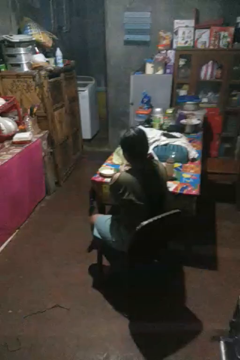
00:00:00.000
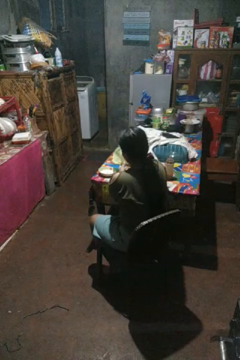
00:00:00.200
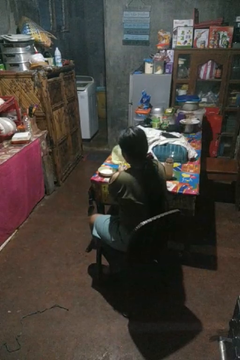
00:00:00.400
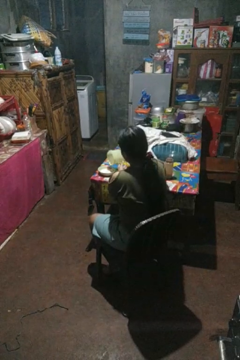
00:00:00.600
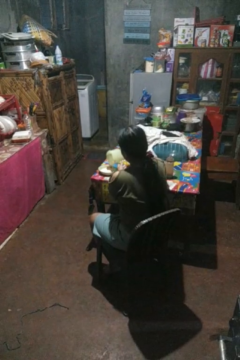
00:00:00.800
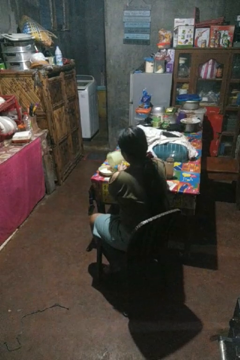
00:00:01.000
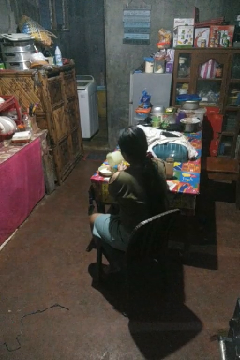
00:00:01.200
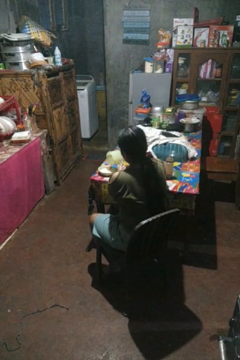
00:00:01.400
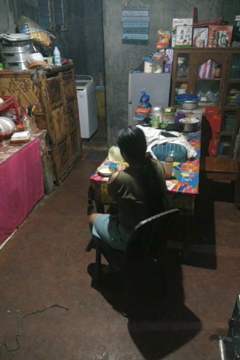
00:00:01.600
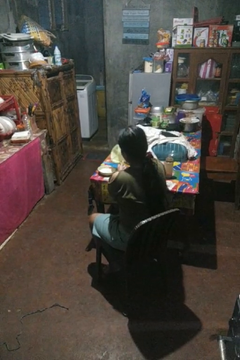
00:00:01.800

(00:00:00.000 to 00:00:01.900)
person pours into bowl

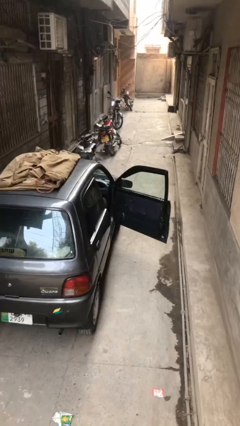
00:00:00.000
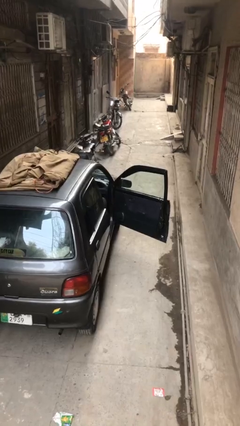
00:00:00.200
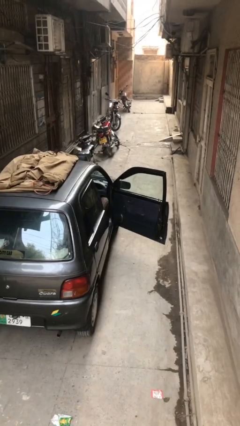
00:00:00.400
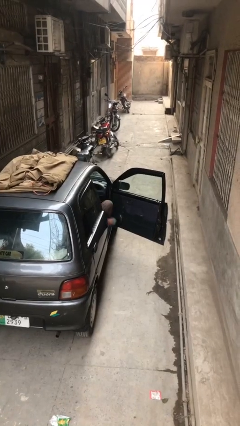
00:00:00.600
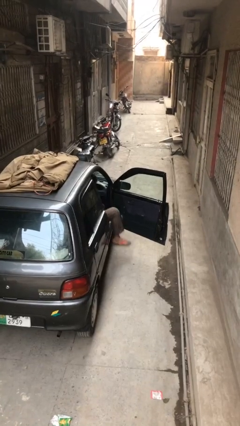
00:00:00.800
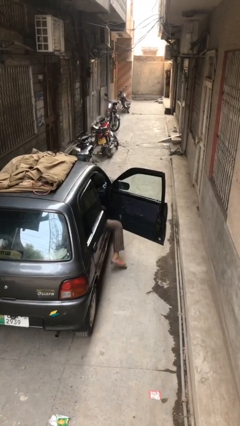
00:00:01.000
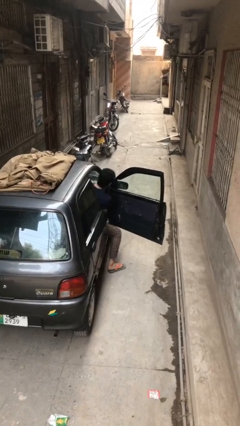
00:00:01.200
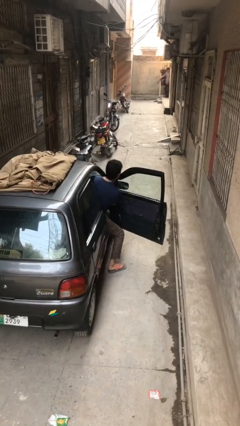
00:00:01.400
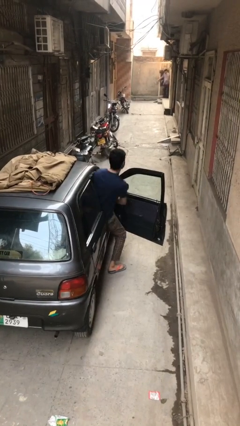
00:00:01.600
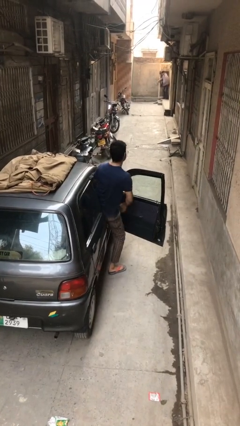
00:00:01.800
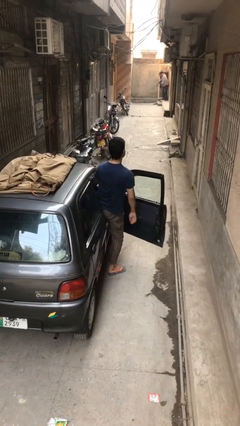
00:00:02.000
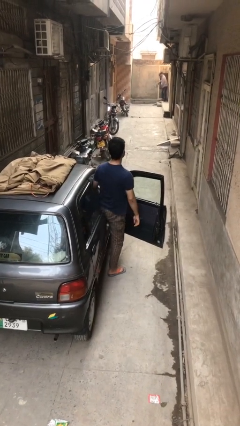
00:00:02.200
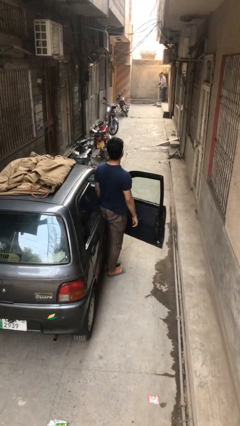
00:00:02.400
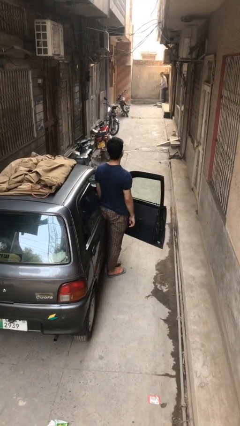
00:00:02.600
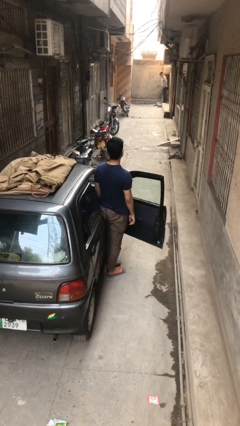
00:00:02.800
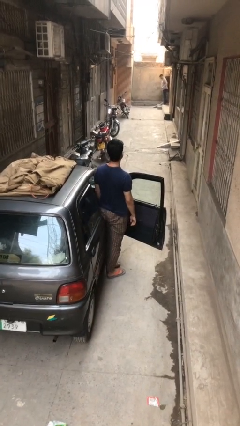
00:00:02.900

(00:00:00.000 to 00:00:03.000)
person exits car

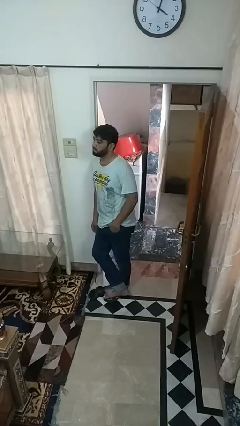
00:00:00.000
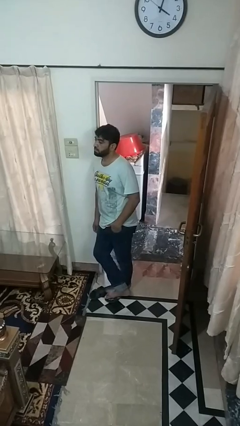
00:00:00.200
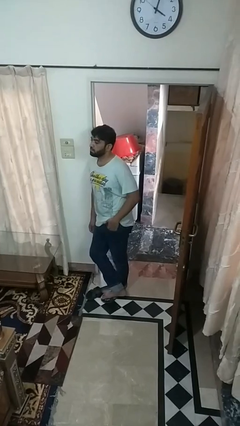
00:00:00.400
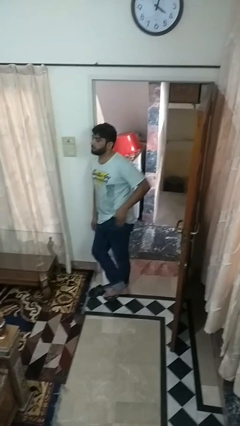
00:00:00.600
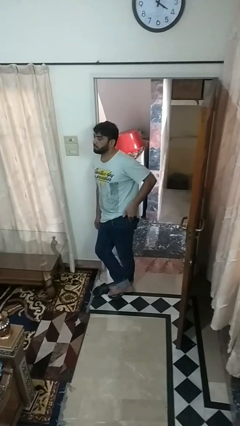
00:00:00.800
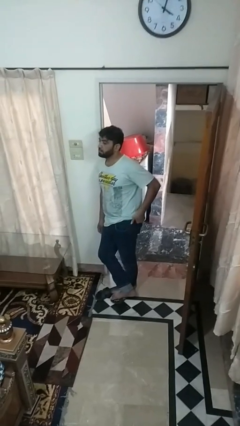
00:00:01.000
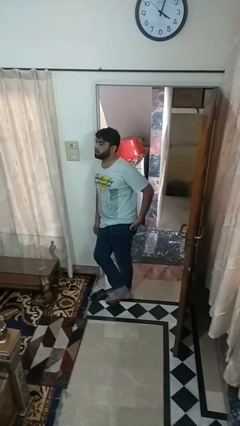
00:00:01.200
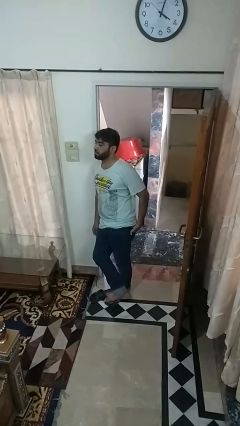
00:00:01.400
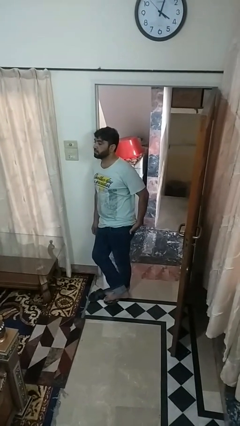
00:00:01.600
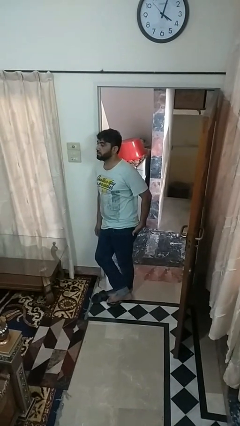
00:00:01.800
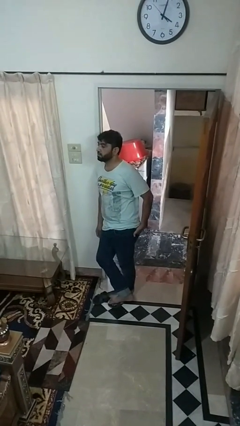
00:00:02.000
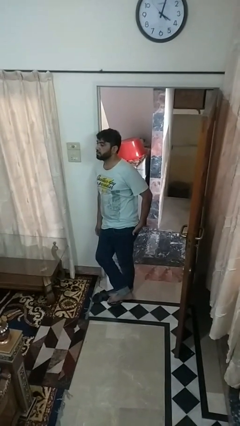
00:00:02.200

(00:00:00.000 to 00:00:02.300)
person puts hands in back pockets

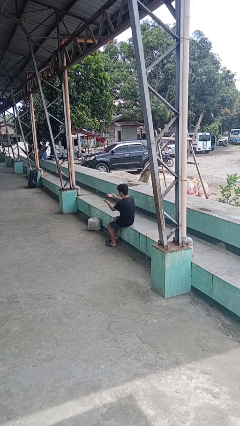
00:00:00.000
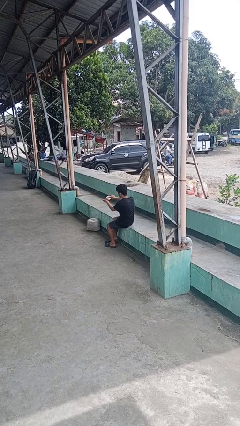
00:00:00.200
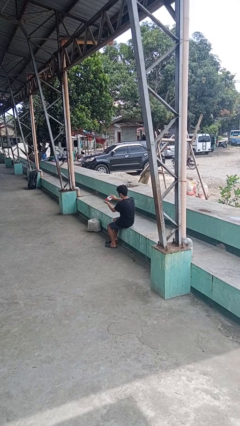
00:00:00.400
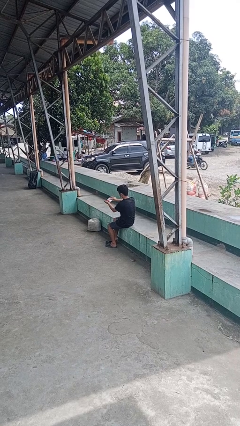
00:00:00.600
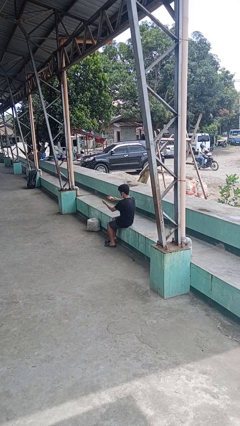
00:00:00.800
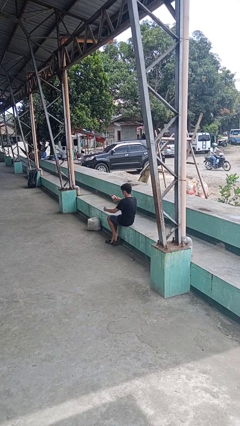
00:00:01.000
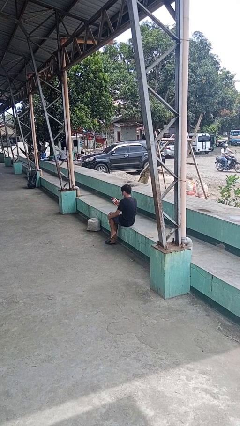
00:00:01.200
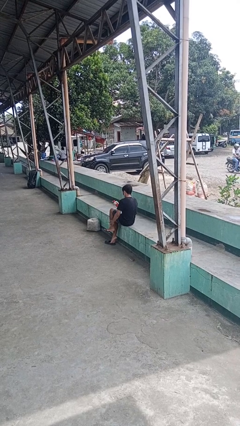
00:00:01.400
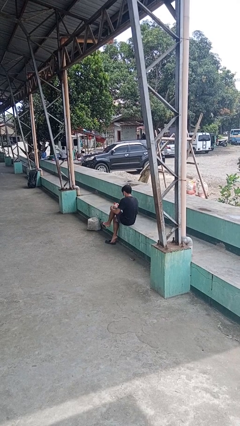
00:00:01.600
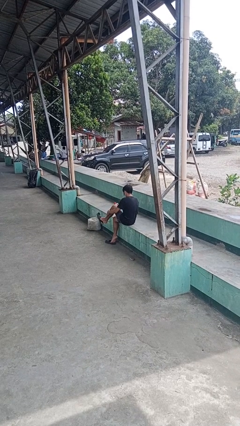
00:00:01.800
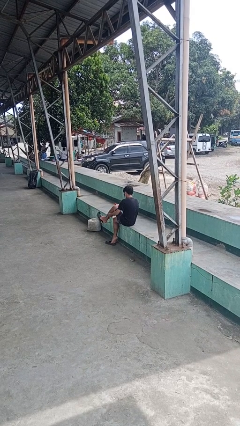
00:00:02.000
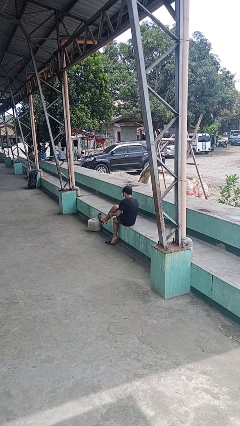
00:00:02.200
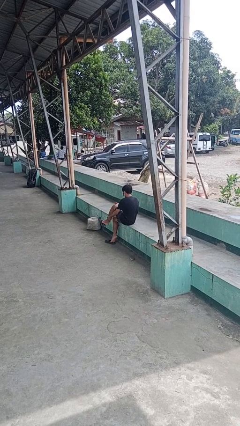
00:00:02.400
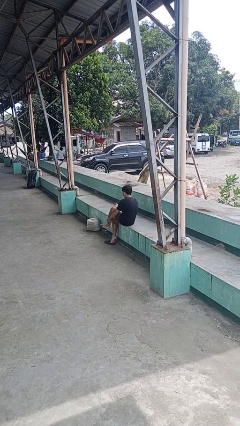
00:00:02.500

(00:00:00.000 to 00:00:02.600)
person applies sunscreen

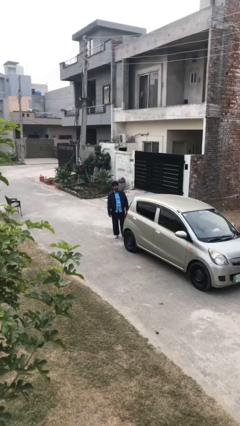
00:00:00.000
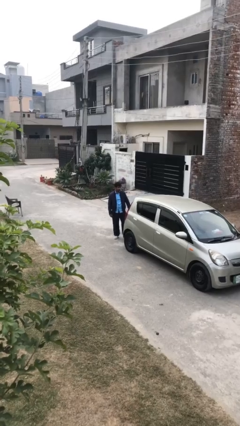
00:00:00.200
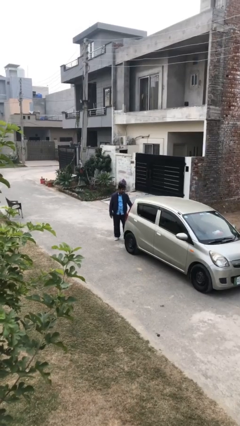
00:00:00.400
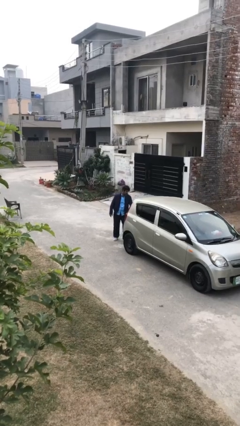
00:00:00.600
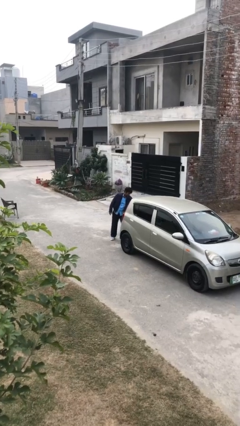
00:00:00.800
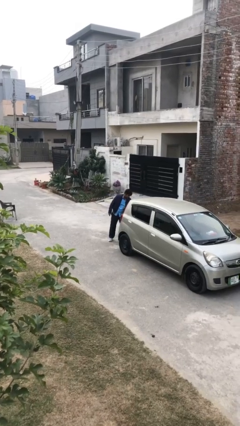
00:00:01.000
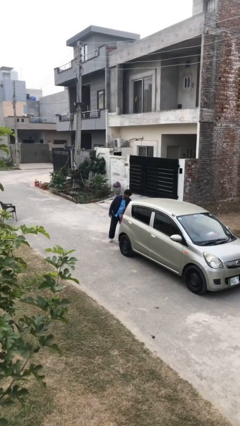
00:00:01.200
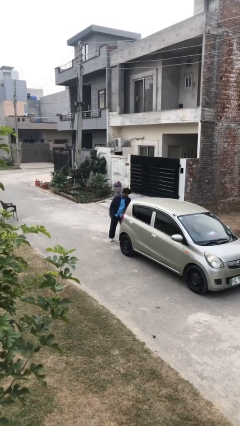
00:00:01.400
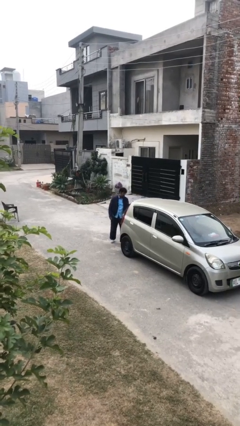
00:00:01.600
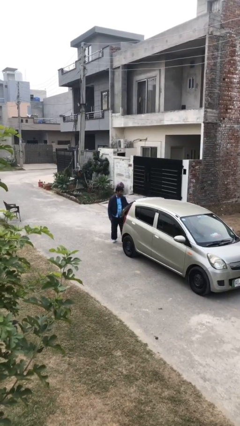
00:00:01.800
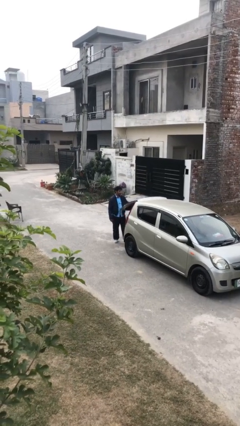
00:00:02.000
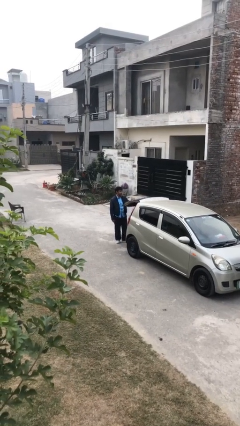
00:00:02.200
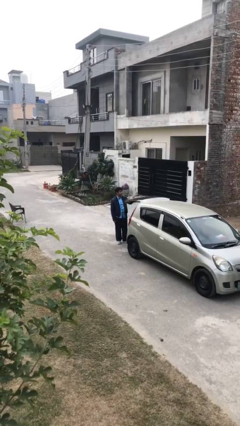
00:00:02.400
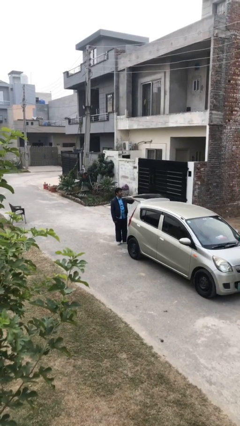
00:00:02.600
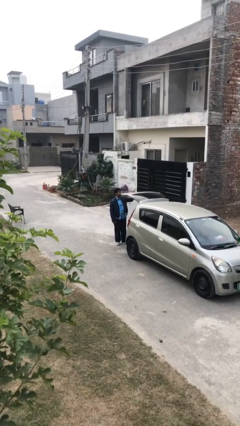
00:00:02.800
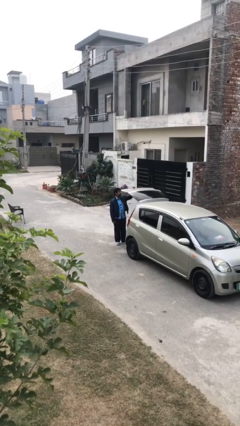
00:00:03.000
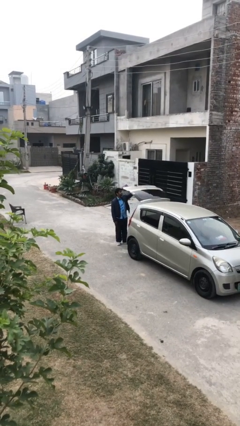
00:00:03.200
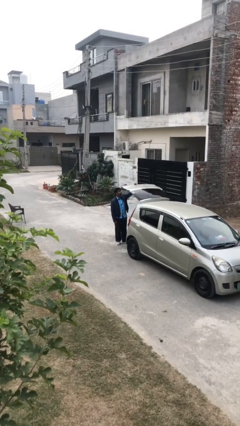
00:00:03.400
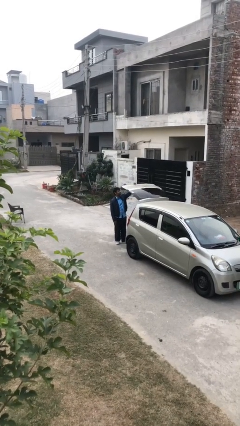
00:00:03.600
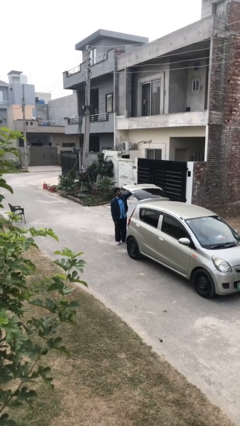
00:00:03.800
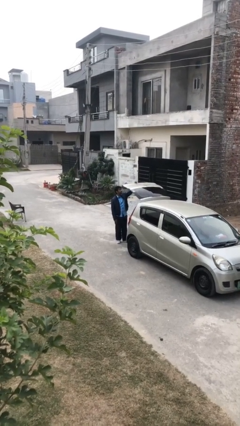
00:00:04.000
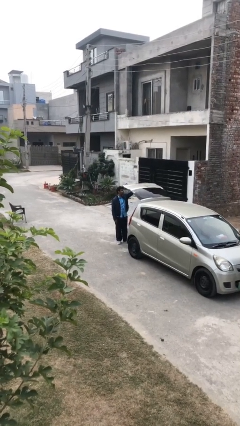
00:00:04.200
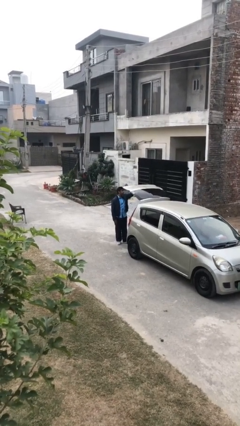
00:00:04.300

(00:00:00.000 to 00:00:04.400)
person opens car trunk

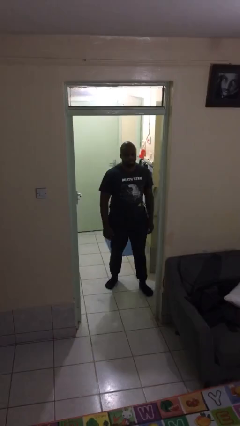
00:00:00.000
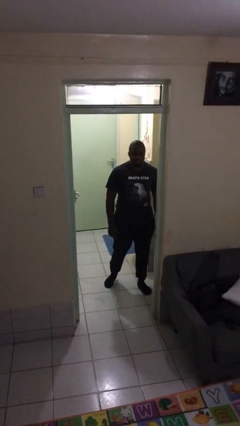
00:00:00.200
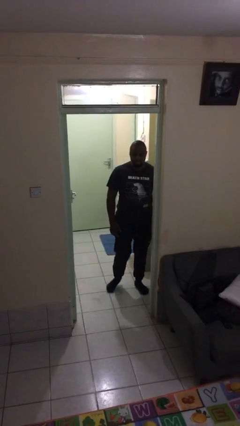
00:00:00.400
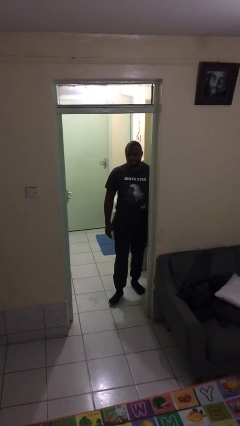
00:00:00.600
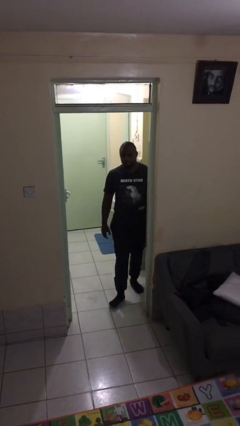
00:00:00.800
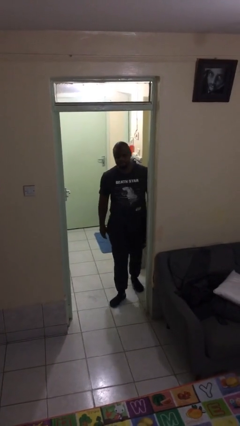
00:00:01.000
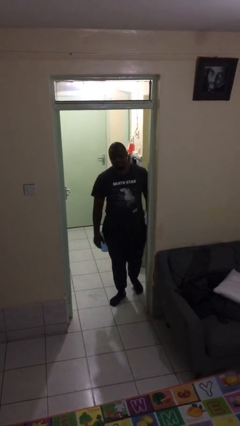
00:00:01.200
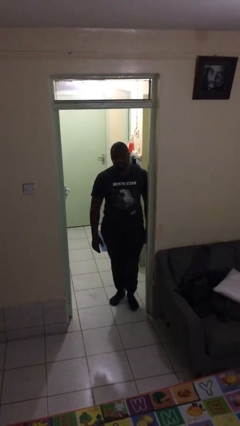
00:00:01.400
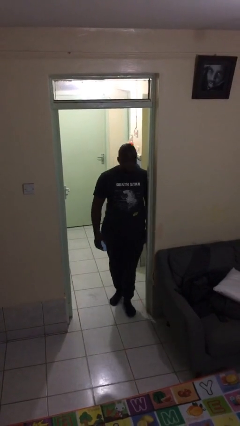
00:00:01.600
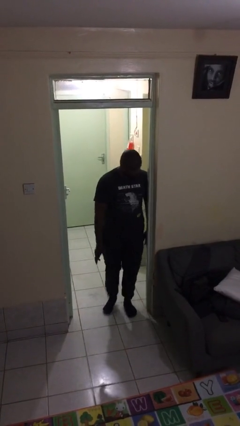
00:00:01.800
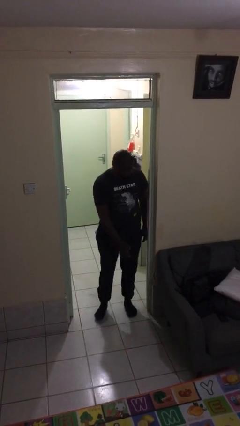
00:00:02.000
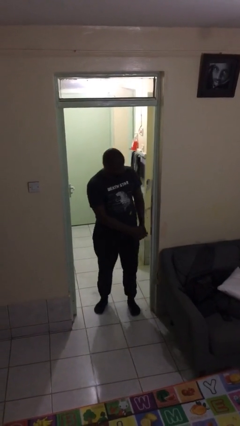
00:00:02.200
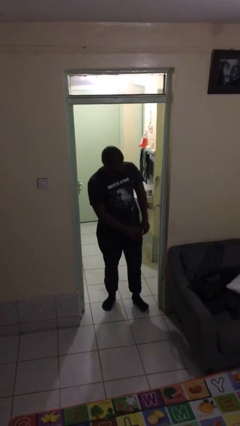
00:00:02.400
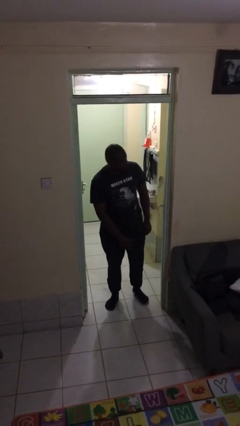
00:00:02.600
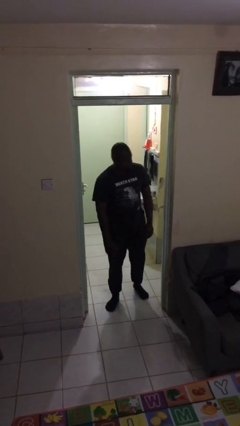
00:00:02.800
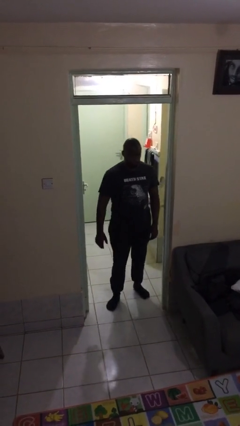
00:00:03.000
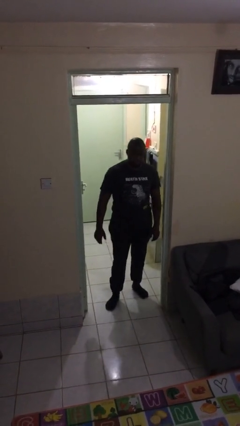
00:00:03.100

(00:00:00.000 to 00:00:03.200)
person bumps into wall

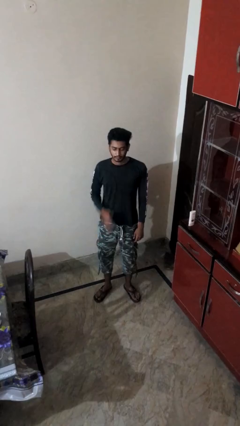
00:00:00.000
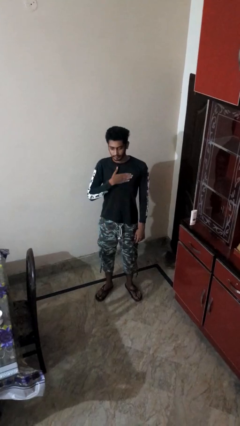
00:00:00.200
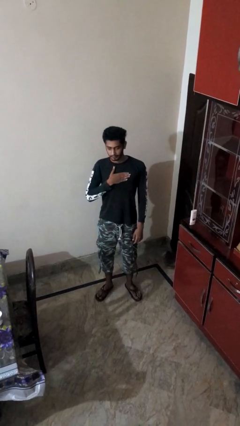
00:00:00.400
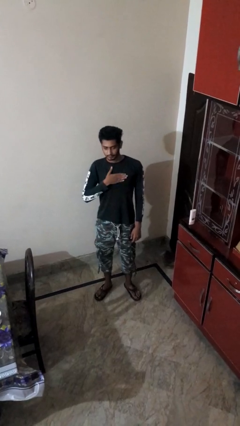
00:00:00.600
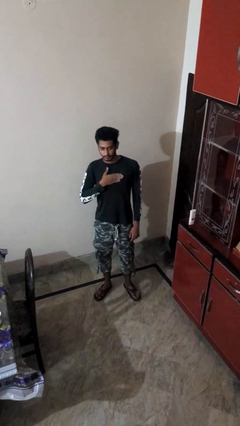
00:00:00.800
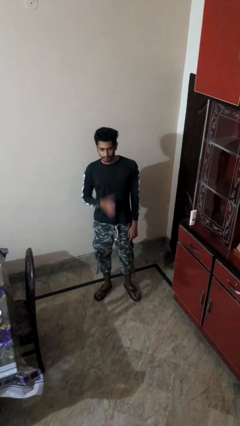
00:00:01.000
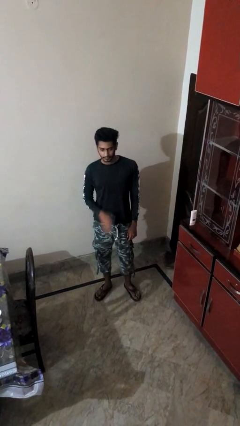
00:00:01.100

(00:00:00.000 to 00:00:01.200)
person drums on chest
